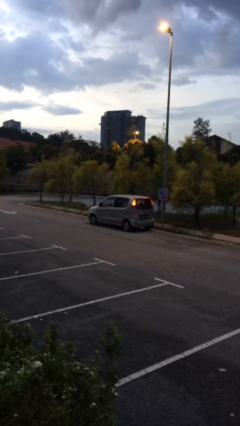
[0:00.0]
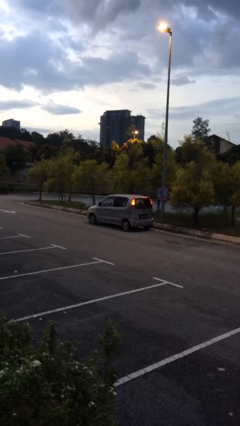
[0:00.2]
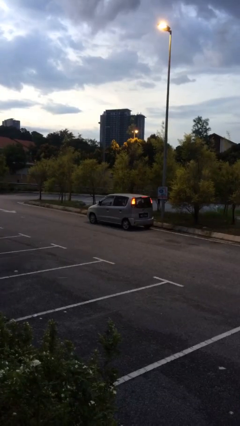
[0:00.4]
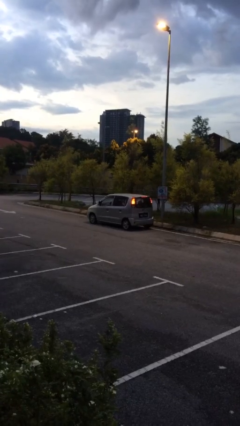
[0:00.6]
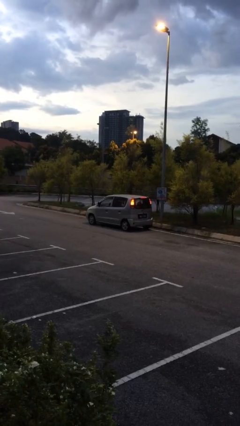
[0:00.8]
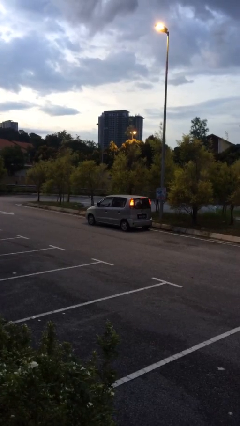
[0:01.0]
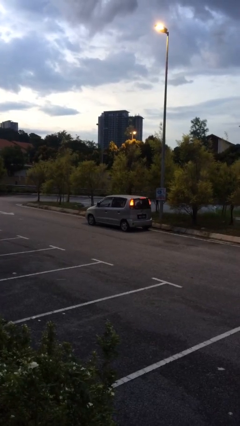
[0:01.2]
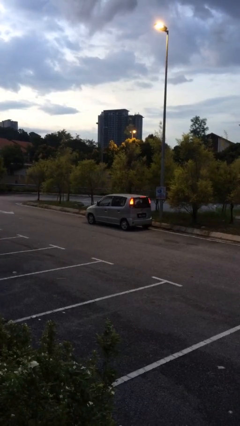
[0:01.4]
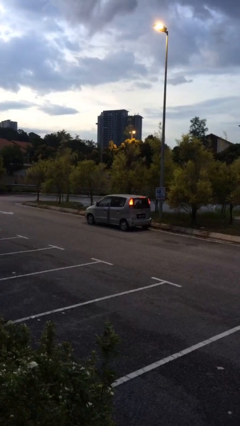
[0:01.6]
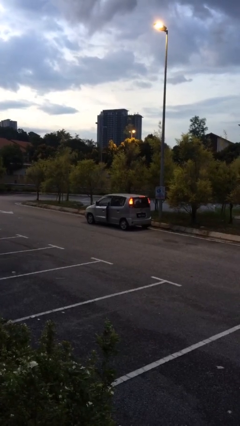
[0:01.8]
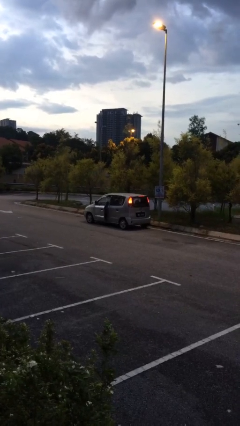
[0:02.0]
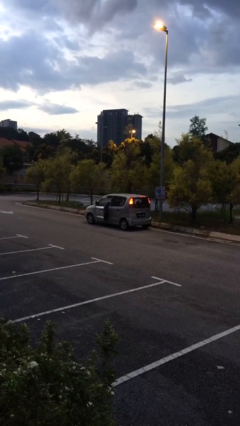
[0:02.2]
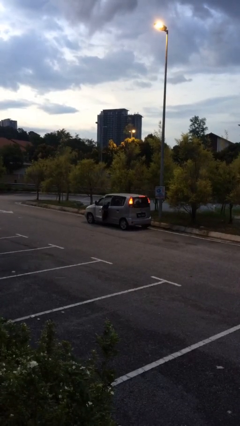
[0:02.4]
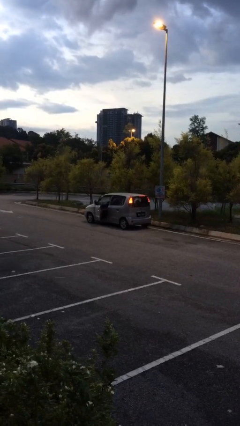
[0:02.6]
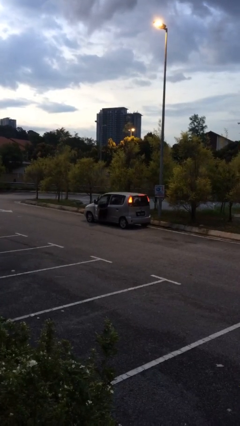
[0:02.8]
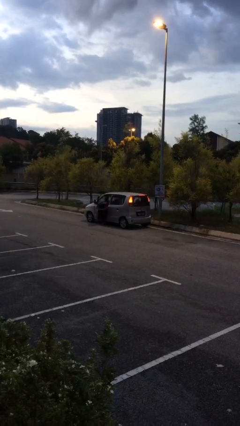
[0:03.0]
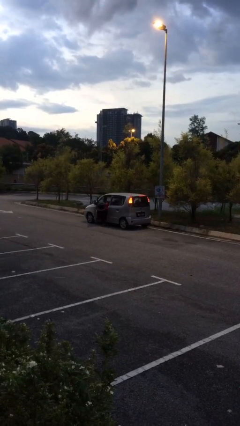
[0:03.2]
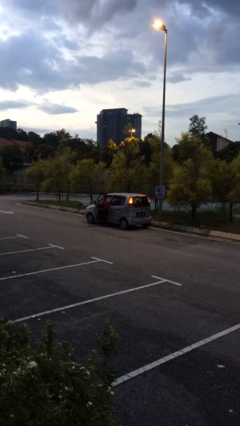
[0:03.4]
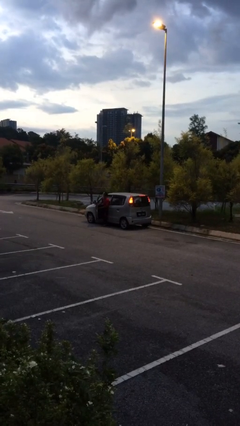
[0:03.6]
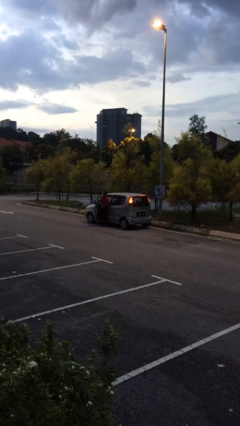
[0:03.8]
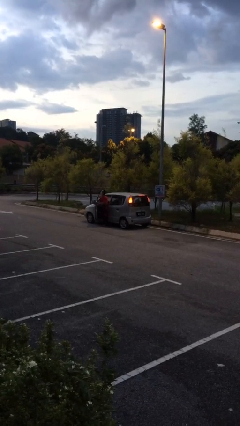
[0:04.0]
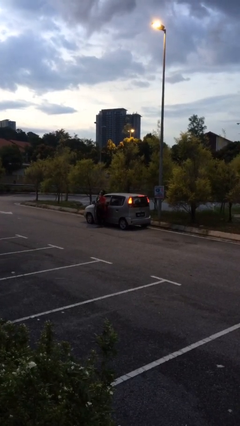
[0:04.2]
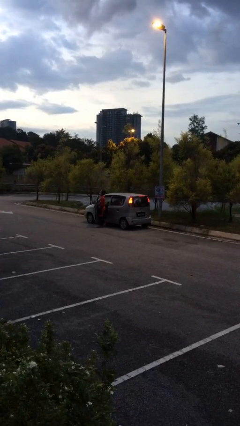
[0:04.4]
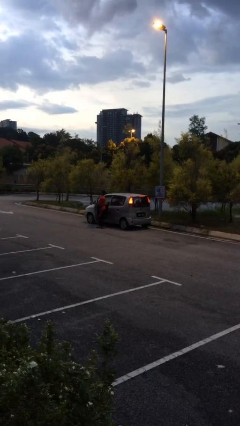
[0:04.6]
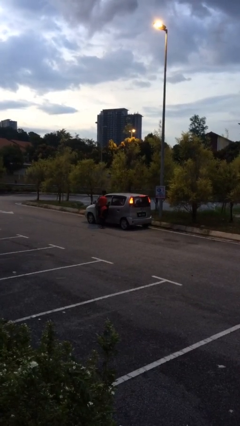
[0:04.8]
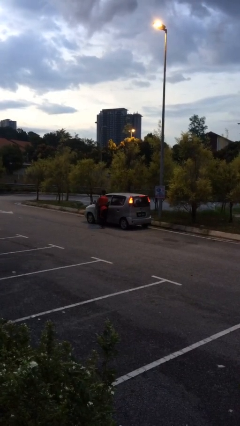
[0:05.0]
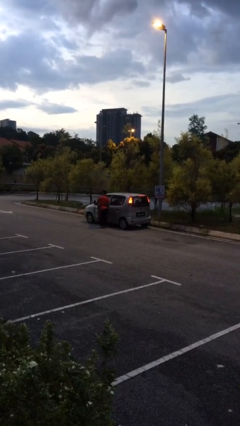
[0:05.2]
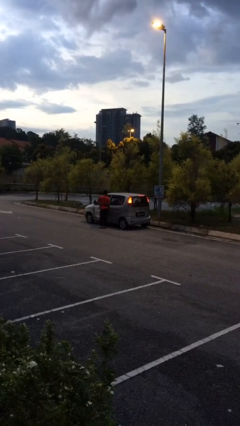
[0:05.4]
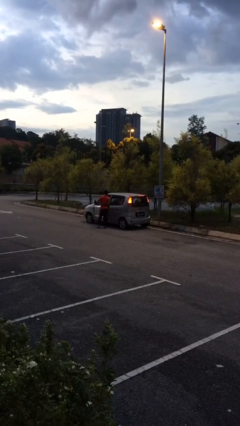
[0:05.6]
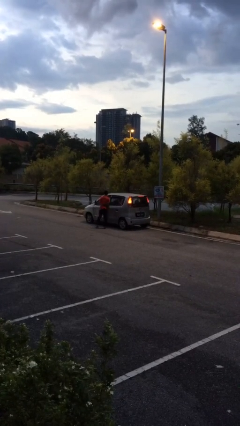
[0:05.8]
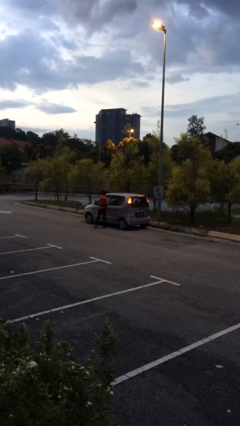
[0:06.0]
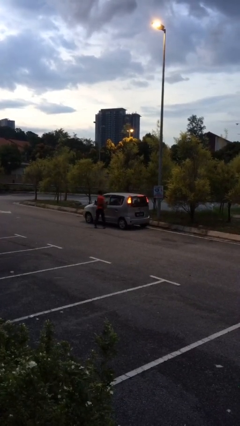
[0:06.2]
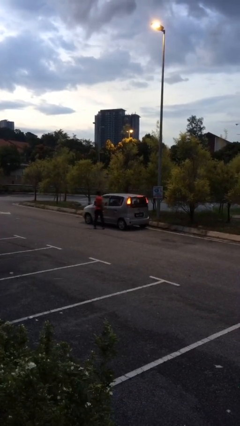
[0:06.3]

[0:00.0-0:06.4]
car drops off person

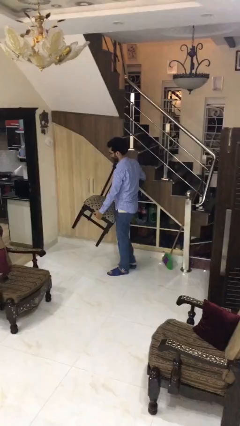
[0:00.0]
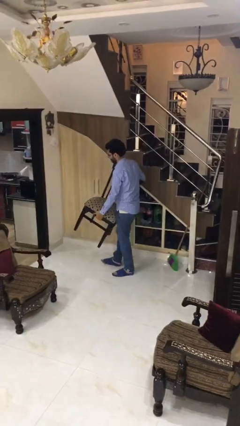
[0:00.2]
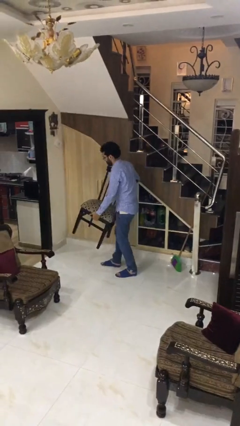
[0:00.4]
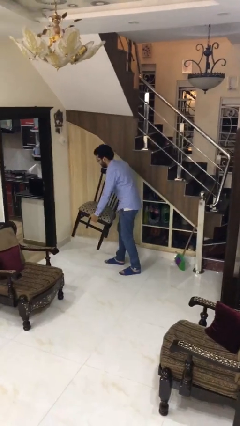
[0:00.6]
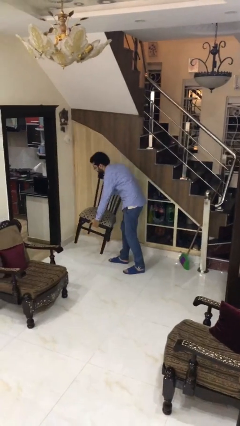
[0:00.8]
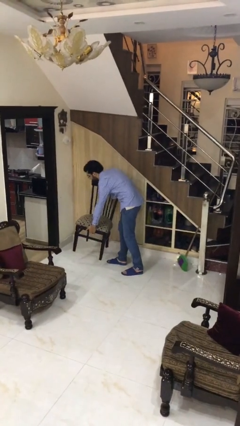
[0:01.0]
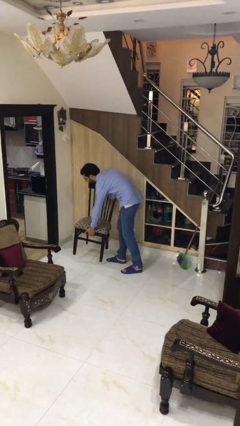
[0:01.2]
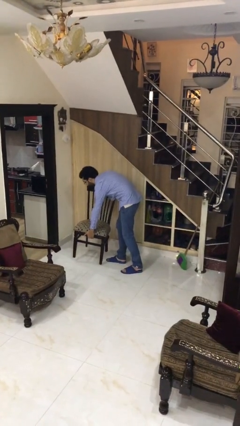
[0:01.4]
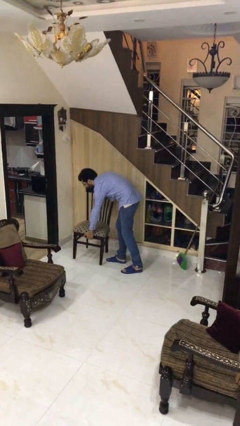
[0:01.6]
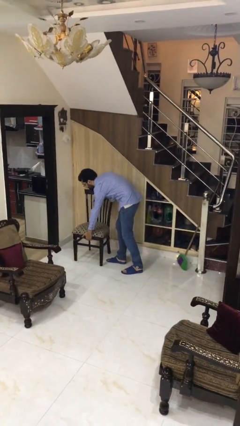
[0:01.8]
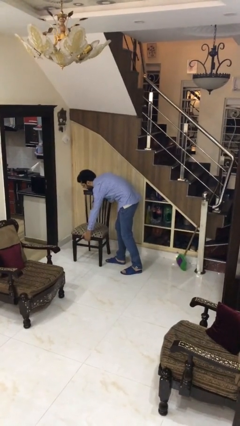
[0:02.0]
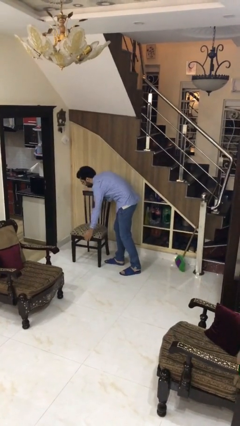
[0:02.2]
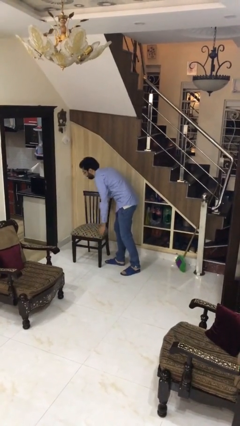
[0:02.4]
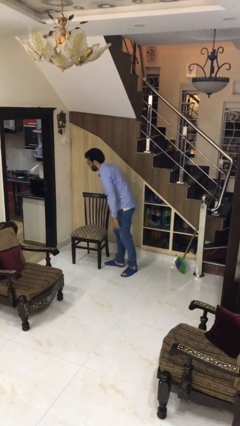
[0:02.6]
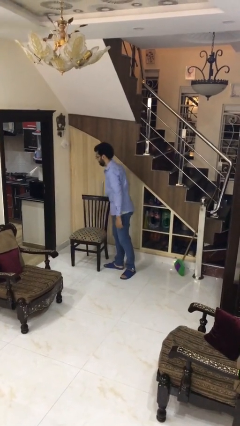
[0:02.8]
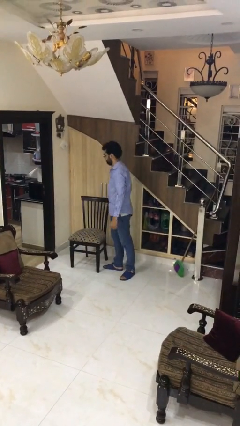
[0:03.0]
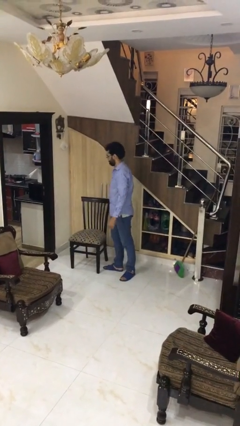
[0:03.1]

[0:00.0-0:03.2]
person puts down object on floor

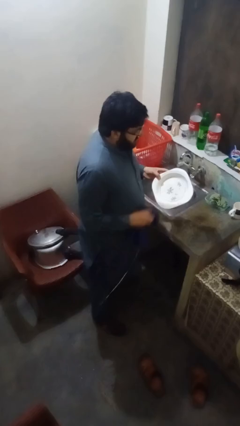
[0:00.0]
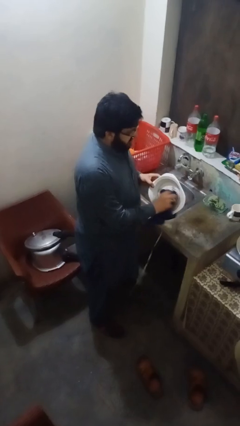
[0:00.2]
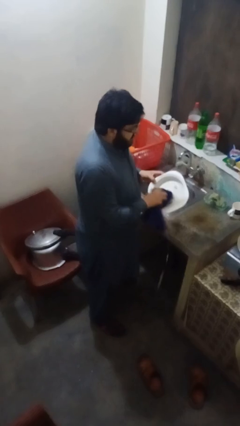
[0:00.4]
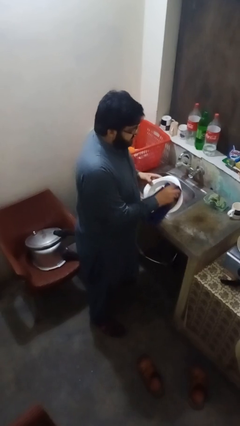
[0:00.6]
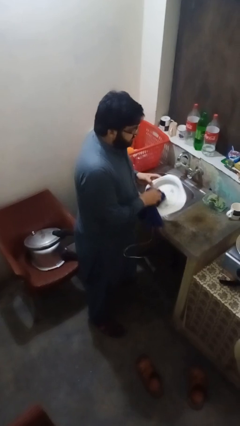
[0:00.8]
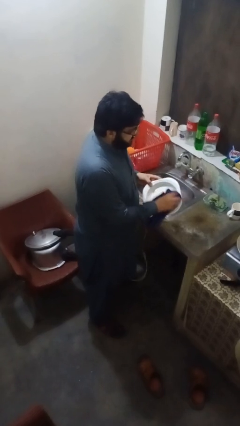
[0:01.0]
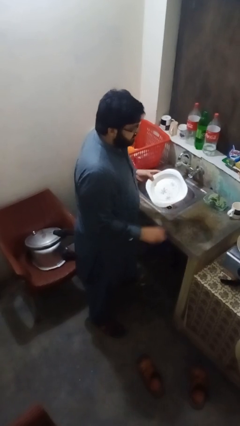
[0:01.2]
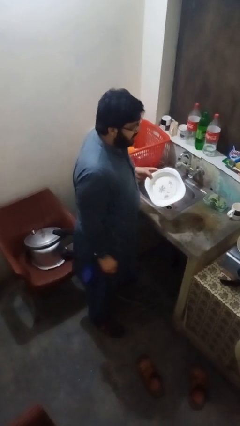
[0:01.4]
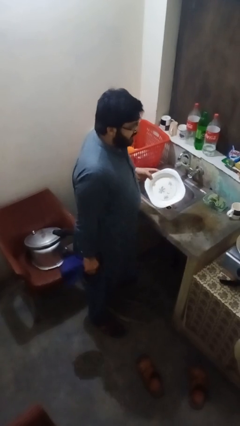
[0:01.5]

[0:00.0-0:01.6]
person dries dish

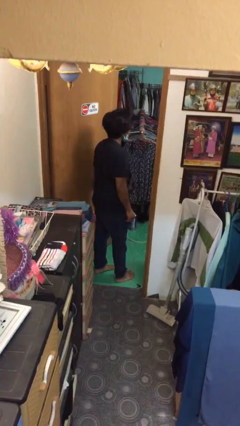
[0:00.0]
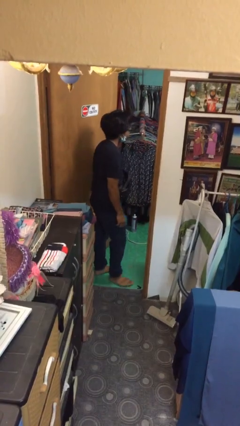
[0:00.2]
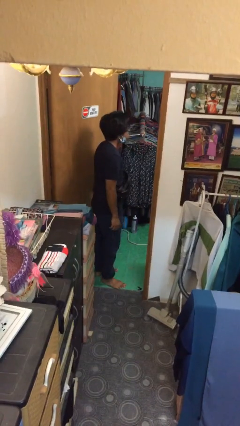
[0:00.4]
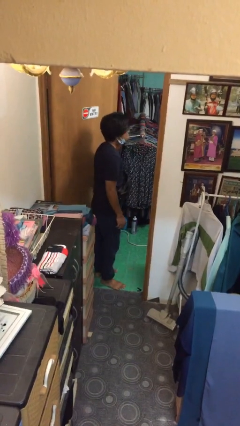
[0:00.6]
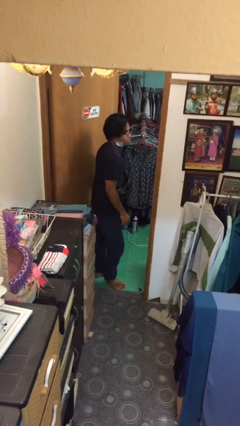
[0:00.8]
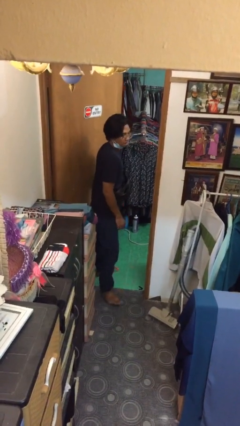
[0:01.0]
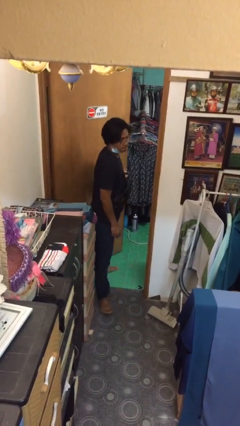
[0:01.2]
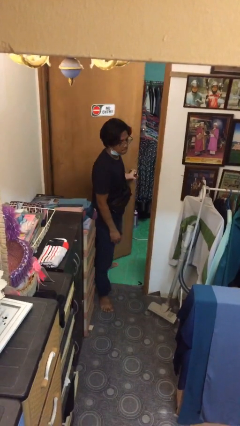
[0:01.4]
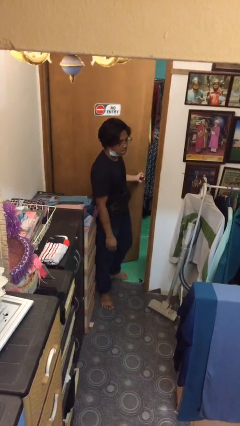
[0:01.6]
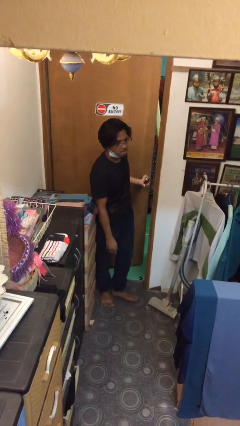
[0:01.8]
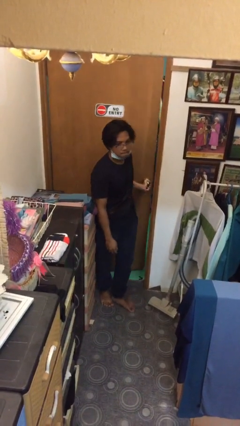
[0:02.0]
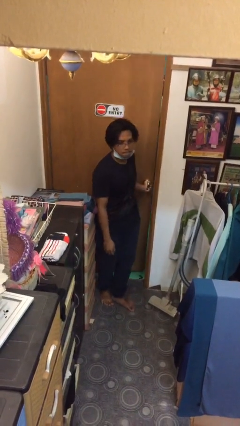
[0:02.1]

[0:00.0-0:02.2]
person closes facility door

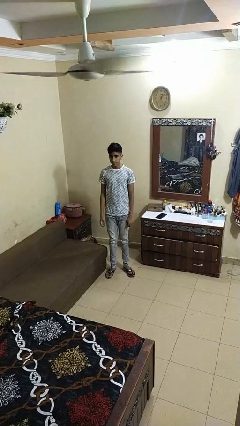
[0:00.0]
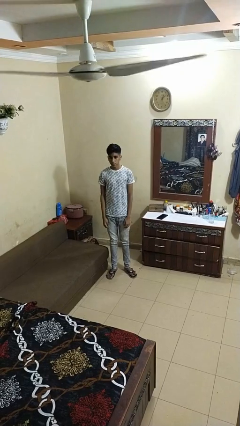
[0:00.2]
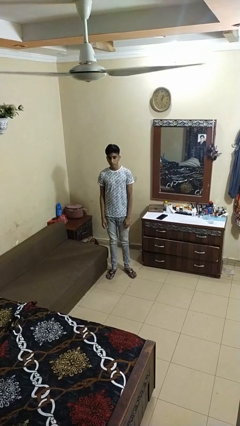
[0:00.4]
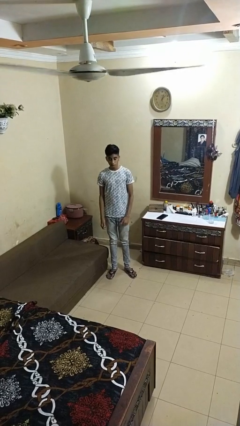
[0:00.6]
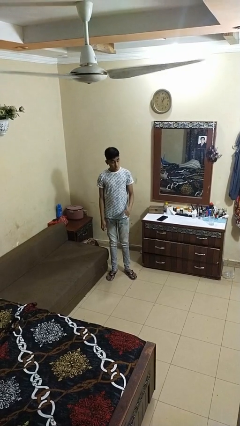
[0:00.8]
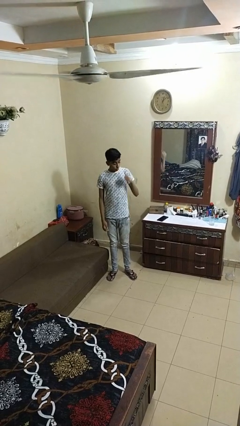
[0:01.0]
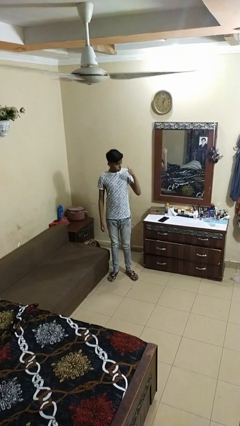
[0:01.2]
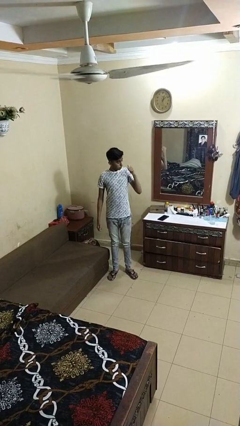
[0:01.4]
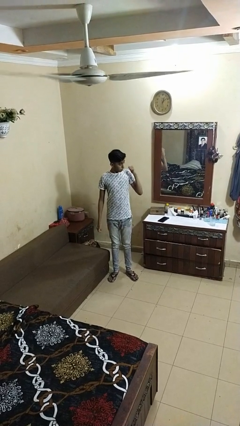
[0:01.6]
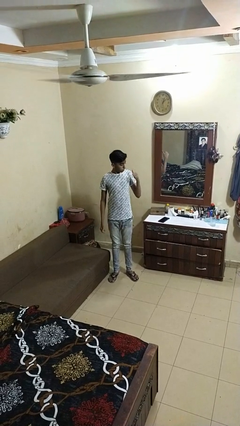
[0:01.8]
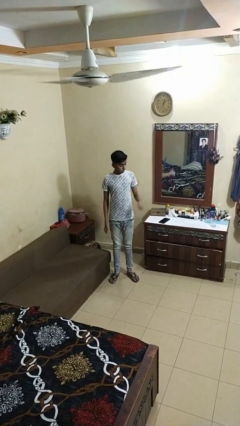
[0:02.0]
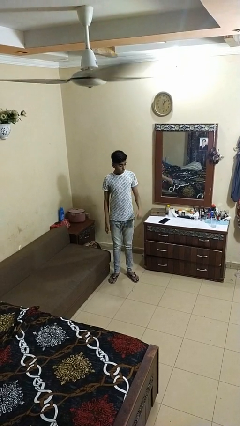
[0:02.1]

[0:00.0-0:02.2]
person gestures behind me

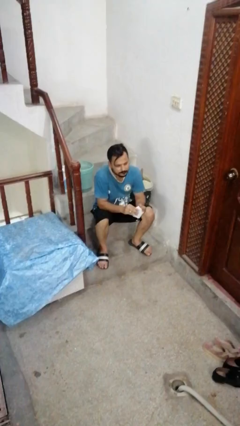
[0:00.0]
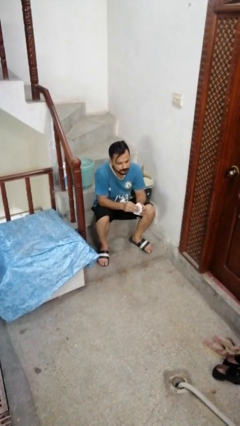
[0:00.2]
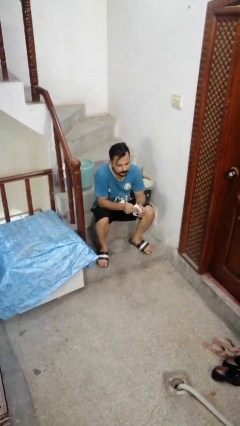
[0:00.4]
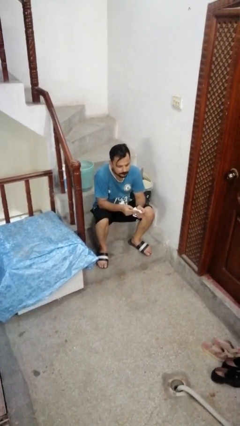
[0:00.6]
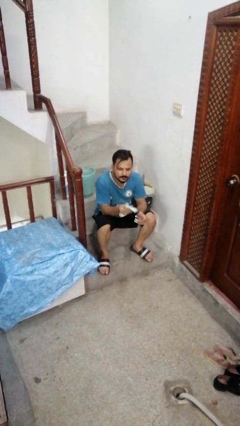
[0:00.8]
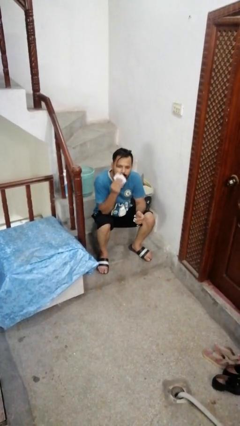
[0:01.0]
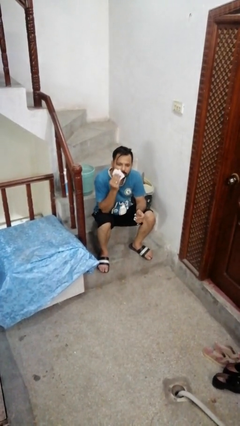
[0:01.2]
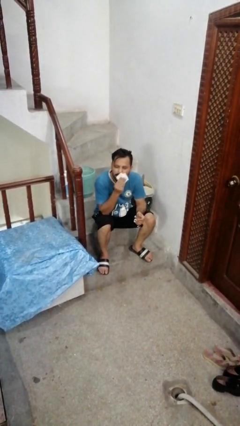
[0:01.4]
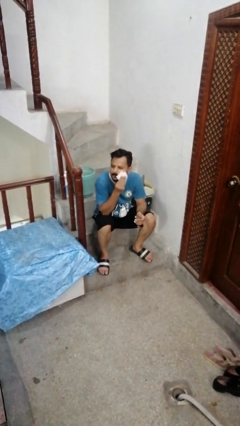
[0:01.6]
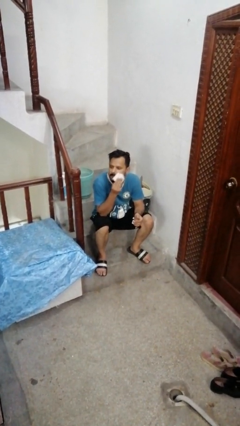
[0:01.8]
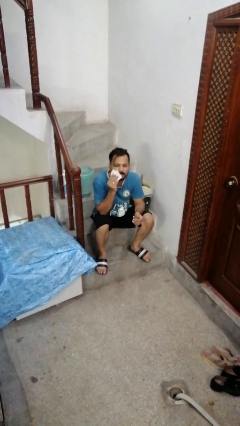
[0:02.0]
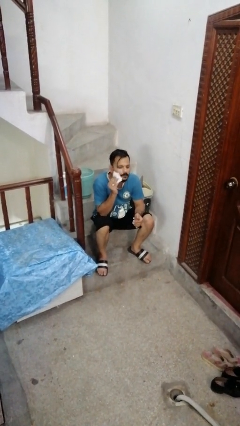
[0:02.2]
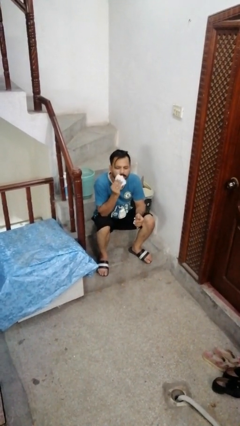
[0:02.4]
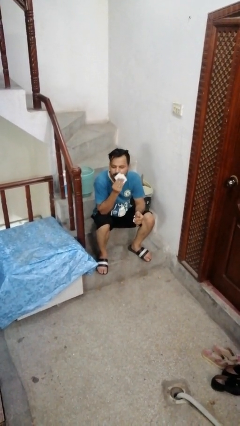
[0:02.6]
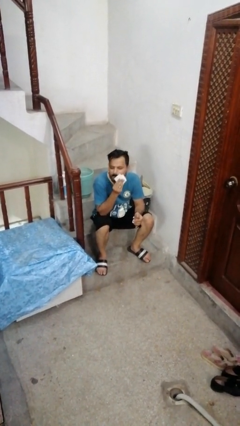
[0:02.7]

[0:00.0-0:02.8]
person wipes mouth with napkin
